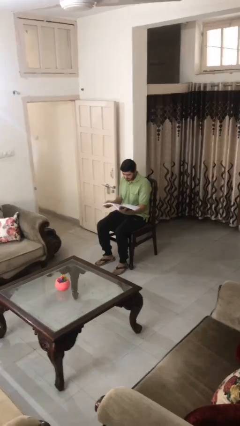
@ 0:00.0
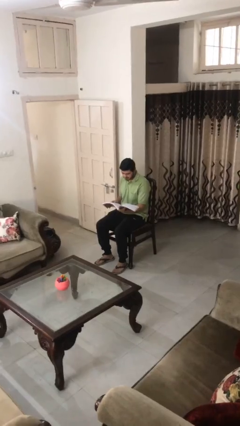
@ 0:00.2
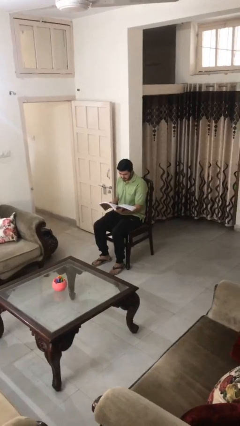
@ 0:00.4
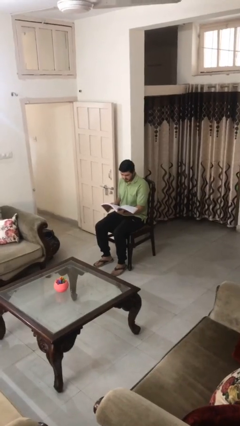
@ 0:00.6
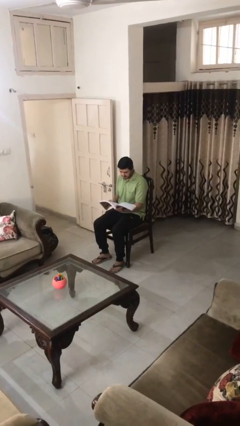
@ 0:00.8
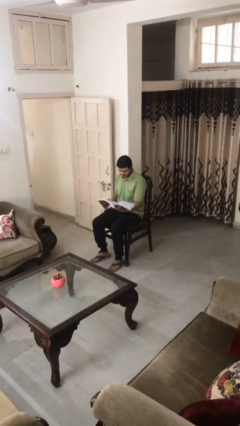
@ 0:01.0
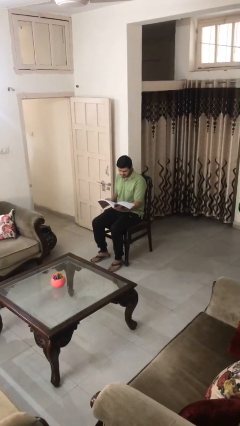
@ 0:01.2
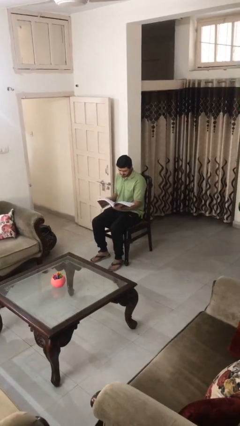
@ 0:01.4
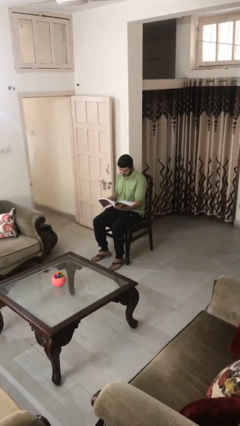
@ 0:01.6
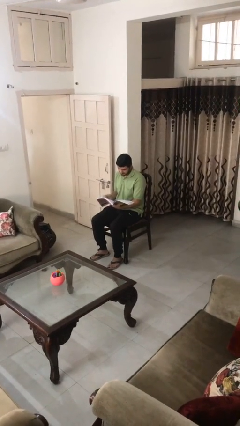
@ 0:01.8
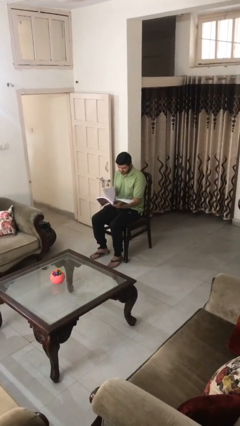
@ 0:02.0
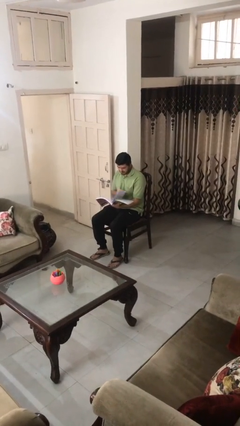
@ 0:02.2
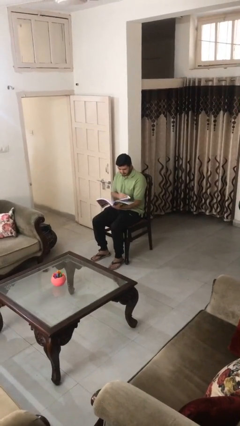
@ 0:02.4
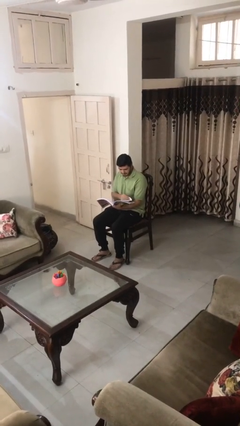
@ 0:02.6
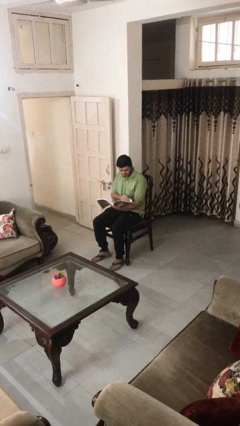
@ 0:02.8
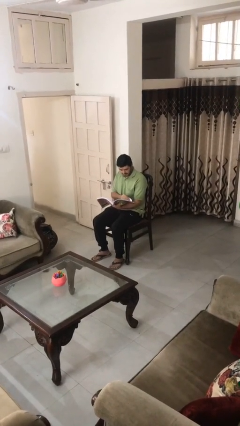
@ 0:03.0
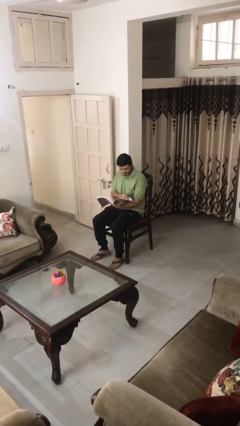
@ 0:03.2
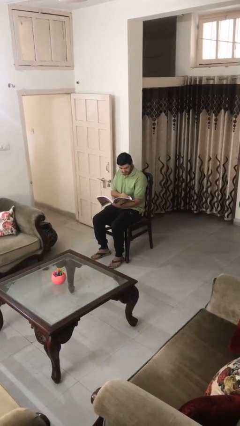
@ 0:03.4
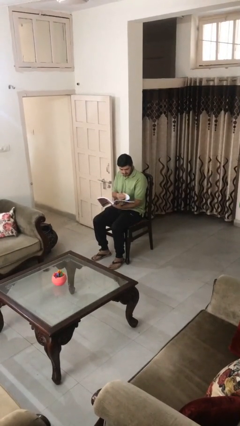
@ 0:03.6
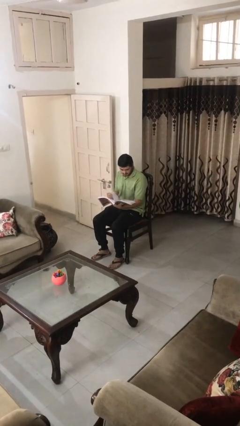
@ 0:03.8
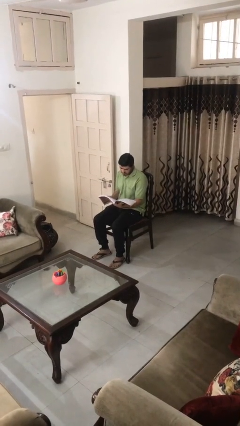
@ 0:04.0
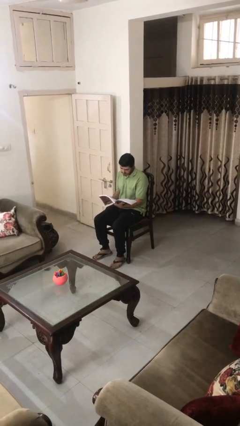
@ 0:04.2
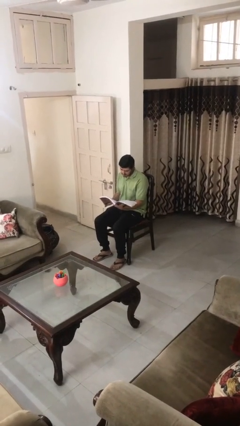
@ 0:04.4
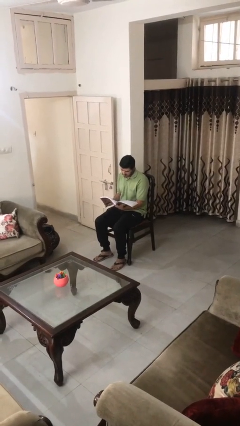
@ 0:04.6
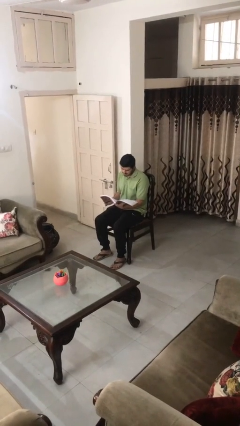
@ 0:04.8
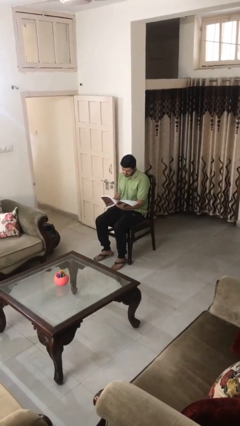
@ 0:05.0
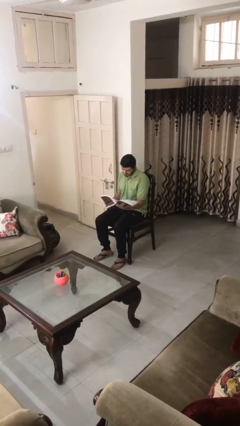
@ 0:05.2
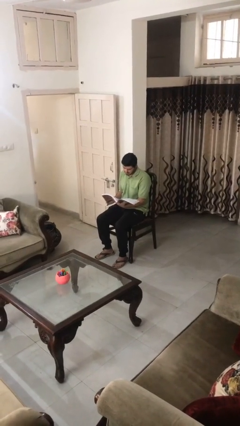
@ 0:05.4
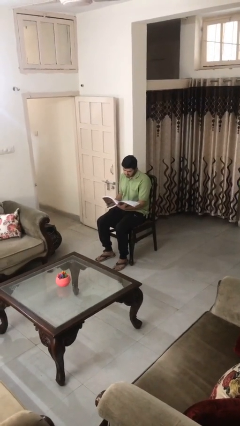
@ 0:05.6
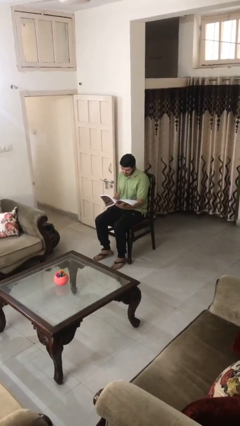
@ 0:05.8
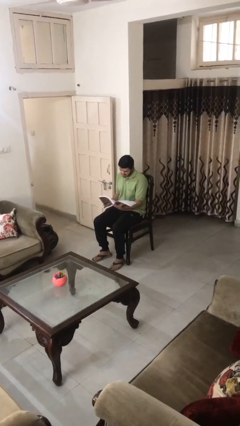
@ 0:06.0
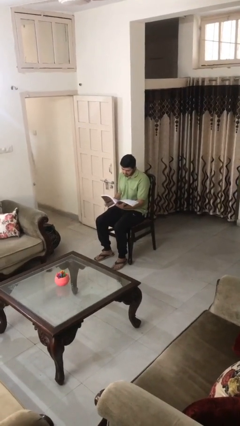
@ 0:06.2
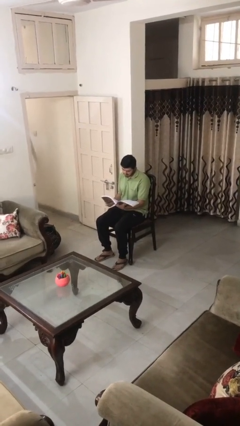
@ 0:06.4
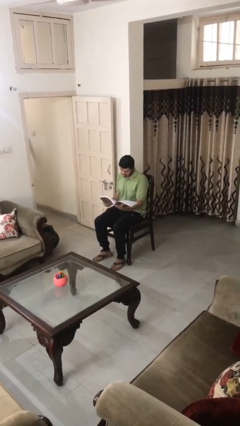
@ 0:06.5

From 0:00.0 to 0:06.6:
person reads document

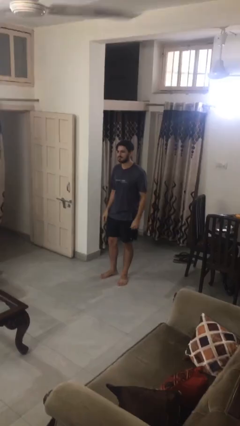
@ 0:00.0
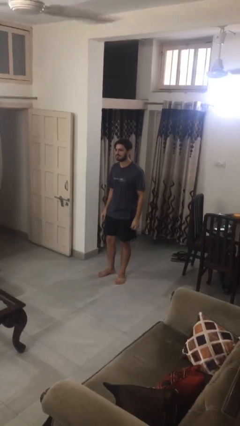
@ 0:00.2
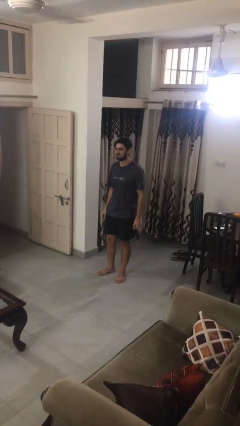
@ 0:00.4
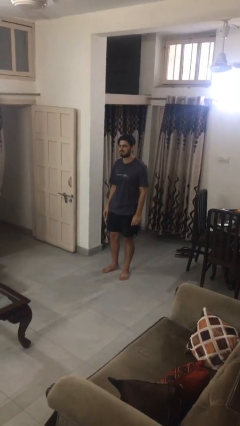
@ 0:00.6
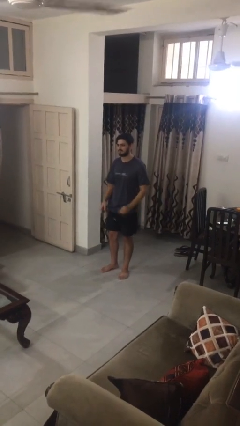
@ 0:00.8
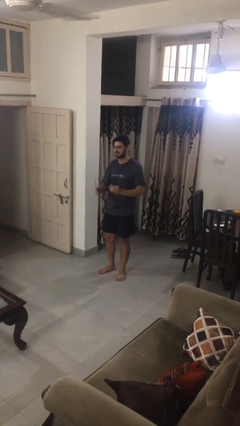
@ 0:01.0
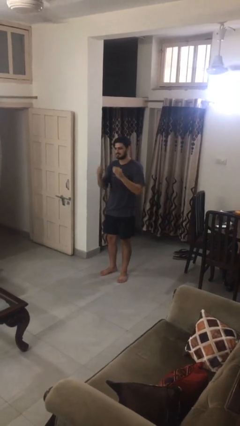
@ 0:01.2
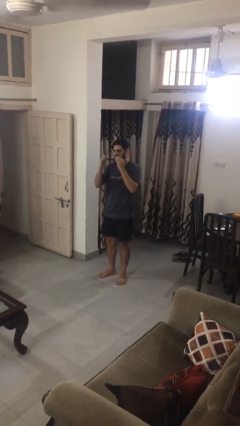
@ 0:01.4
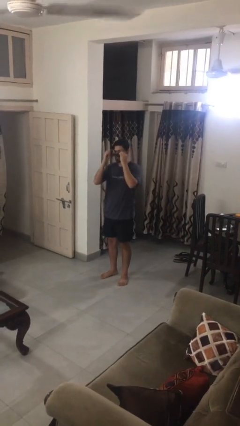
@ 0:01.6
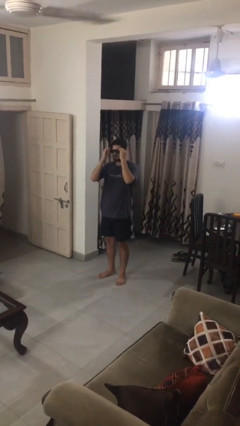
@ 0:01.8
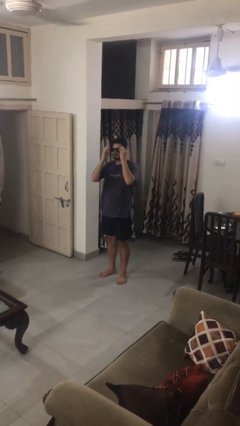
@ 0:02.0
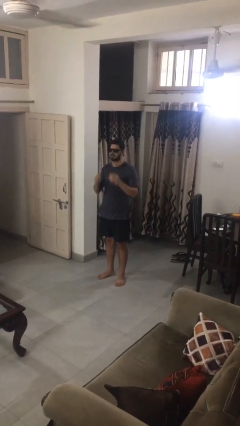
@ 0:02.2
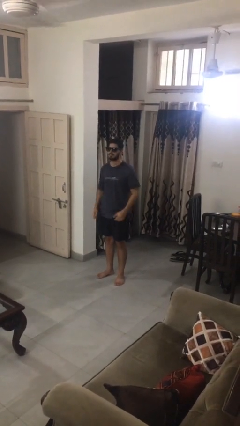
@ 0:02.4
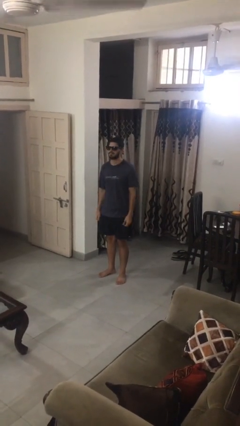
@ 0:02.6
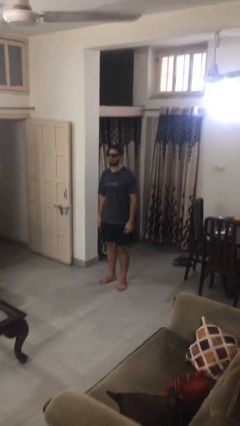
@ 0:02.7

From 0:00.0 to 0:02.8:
person puts on sunglasses

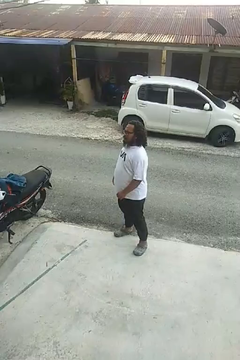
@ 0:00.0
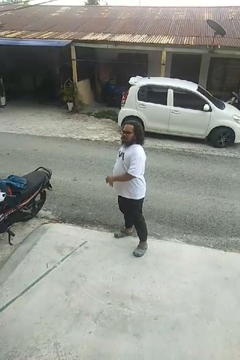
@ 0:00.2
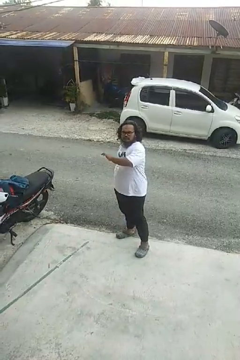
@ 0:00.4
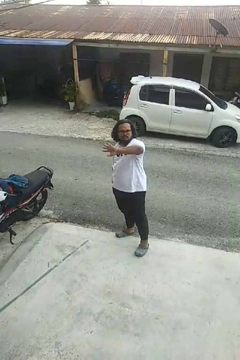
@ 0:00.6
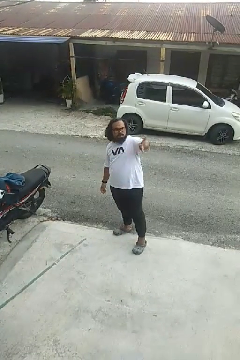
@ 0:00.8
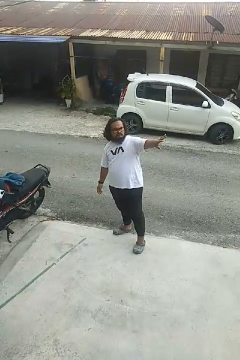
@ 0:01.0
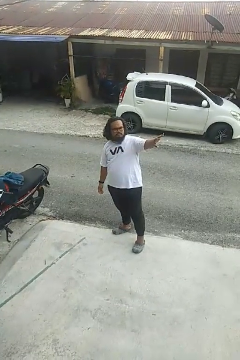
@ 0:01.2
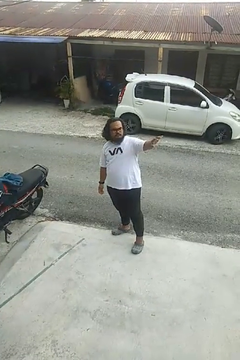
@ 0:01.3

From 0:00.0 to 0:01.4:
person gestures swipe left

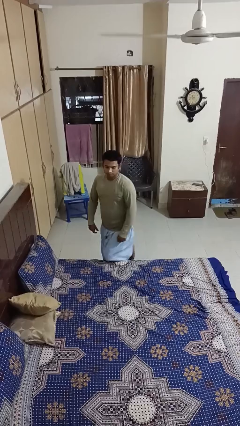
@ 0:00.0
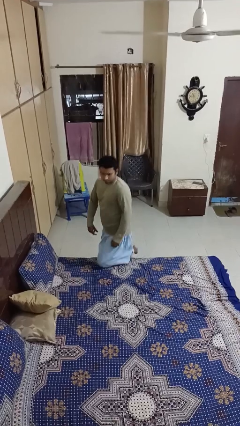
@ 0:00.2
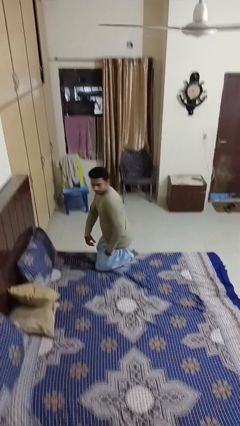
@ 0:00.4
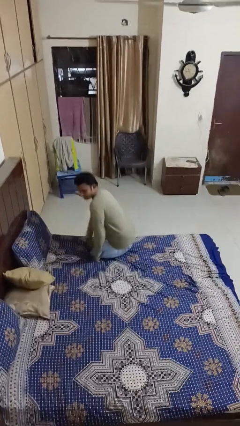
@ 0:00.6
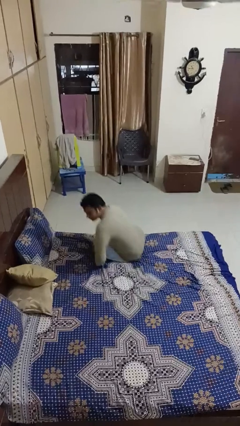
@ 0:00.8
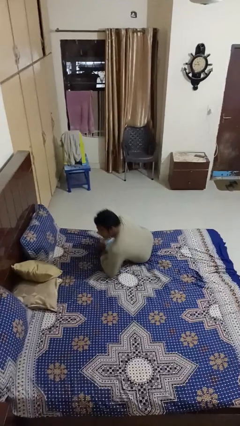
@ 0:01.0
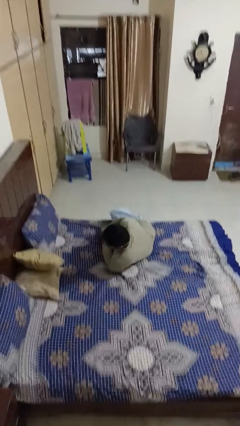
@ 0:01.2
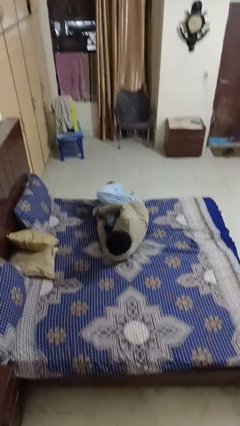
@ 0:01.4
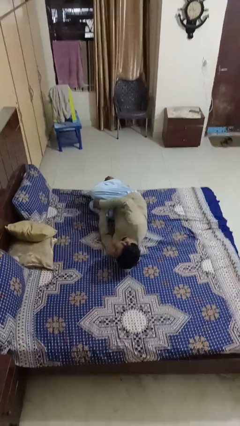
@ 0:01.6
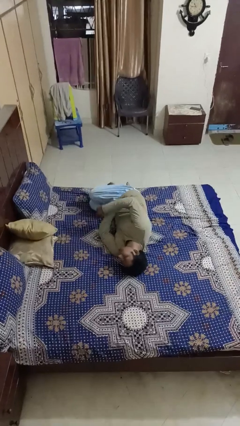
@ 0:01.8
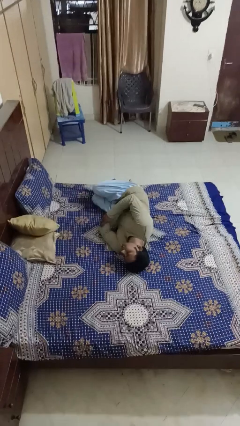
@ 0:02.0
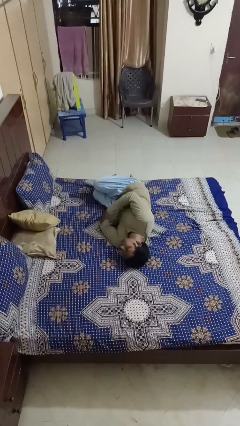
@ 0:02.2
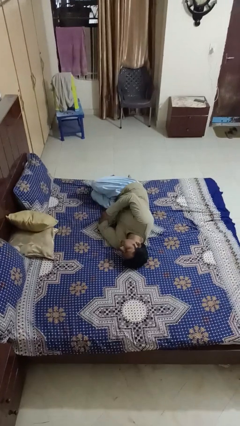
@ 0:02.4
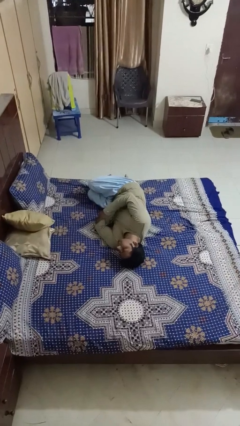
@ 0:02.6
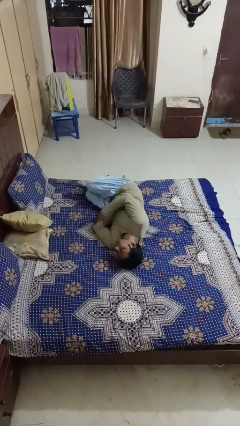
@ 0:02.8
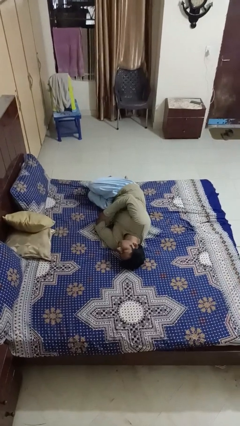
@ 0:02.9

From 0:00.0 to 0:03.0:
person lies down on bed

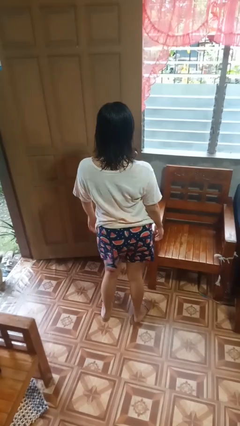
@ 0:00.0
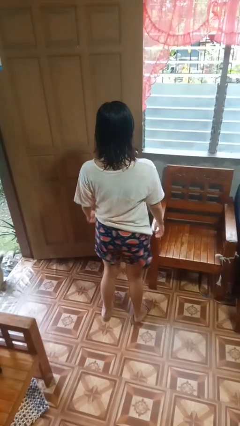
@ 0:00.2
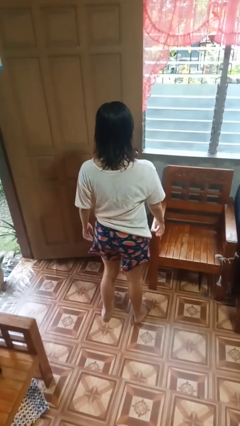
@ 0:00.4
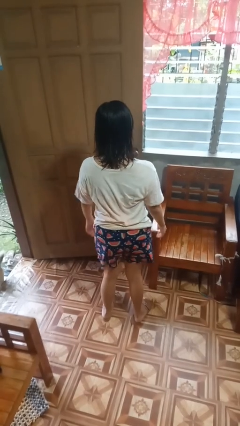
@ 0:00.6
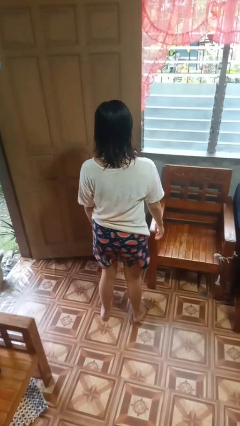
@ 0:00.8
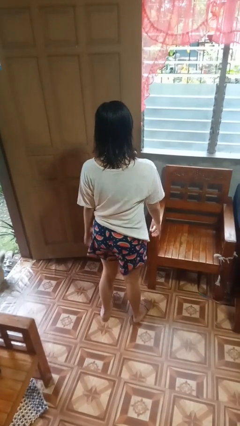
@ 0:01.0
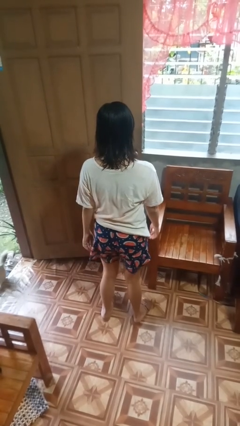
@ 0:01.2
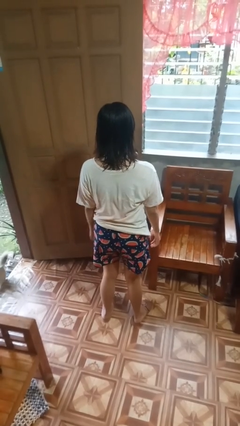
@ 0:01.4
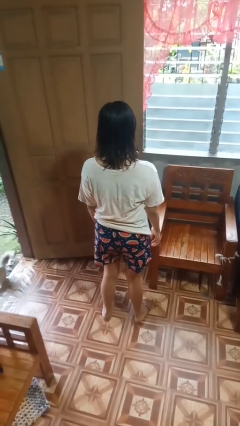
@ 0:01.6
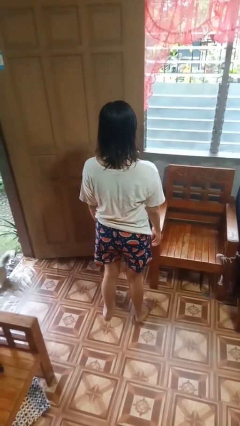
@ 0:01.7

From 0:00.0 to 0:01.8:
person wiggles hips

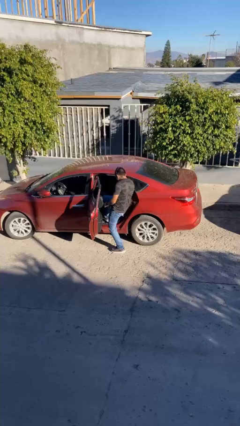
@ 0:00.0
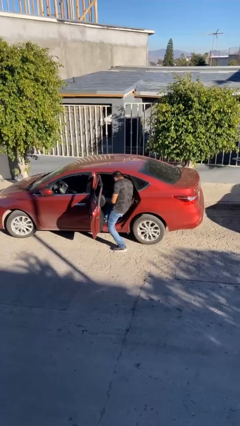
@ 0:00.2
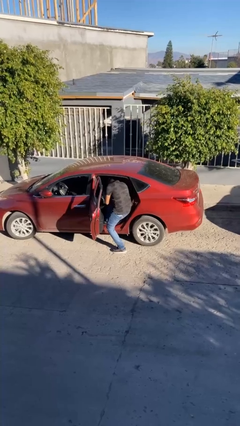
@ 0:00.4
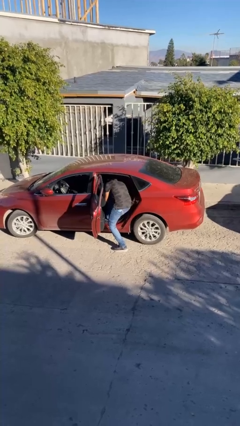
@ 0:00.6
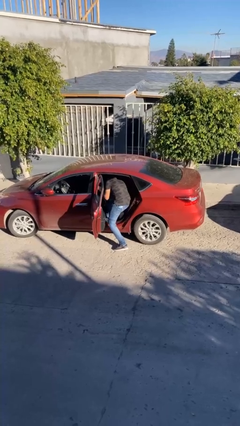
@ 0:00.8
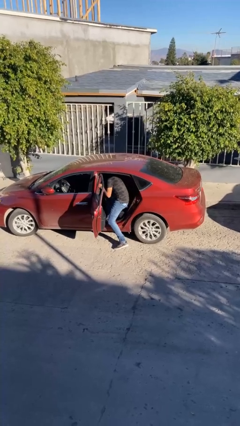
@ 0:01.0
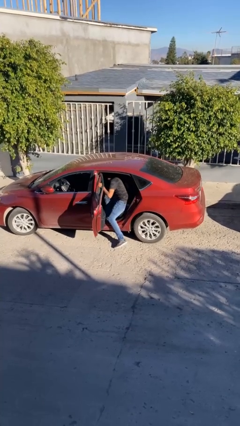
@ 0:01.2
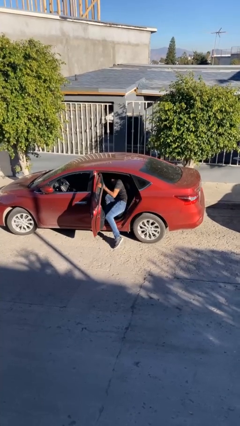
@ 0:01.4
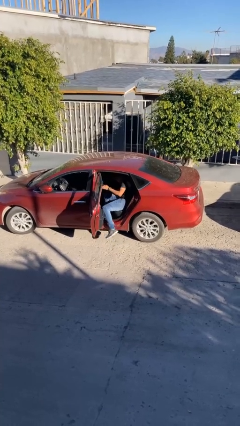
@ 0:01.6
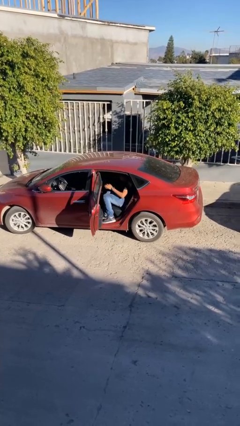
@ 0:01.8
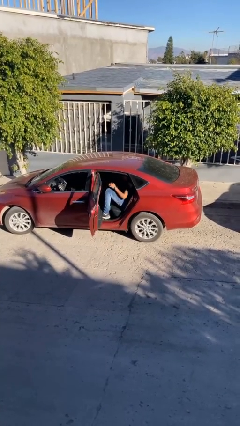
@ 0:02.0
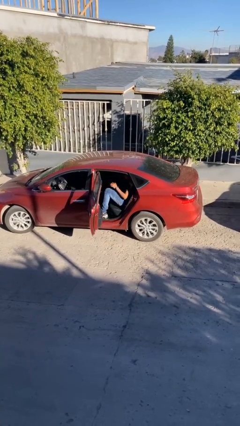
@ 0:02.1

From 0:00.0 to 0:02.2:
person enters car
